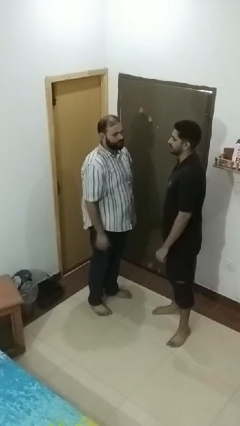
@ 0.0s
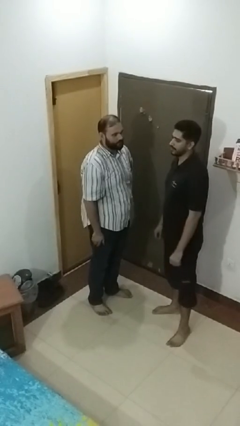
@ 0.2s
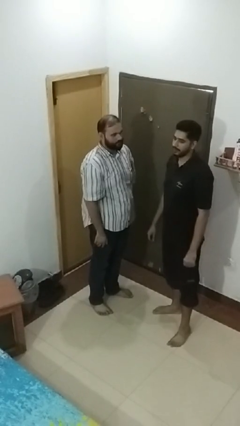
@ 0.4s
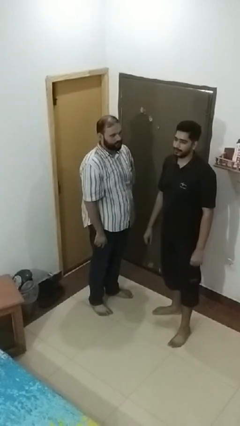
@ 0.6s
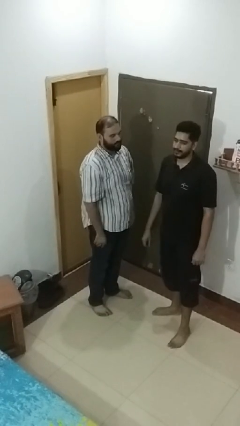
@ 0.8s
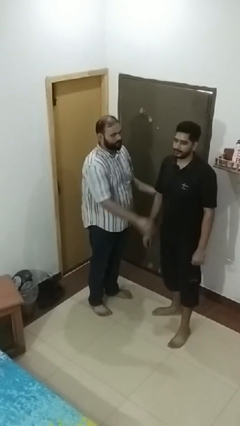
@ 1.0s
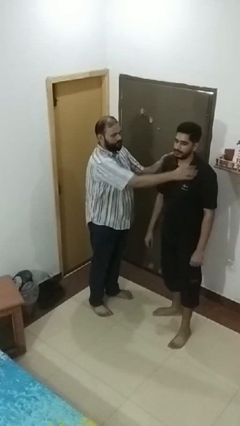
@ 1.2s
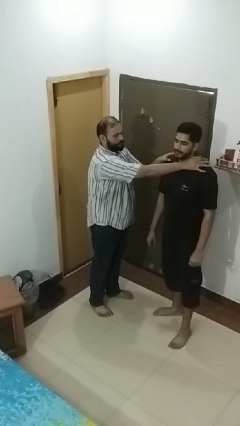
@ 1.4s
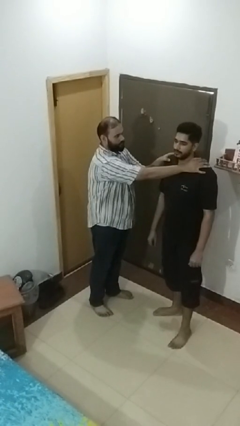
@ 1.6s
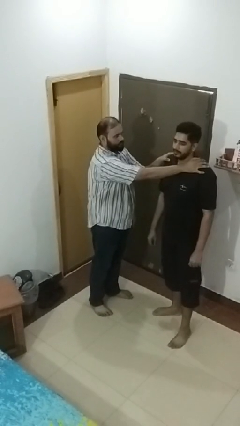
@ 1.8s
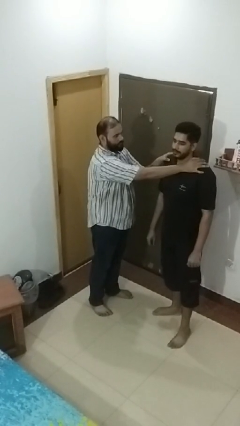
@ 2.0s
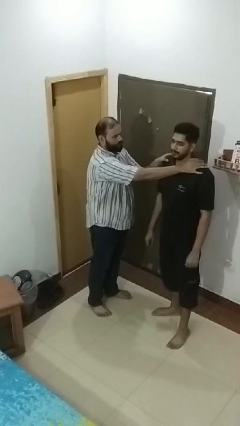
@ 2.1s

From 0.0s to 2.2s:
person grabs person by shoulder

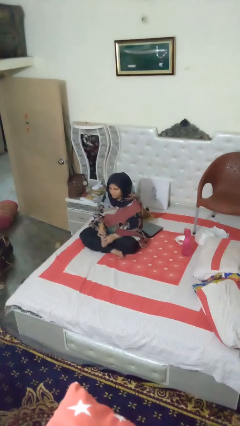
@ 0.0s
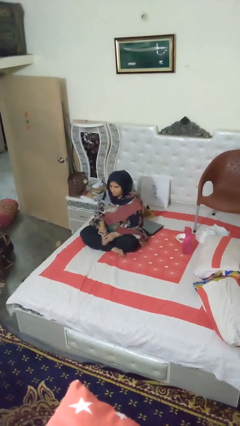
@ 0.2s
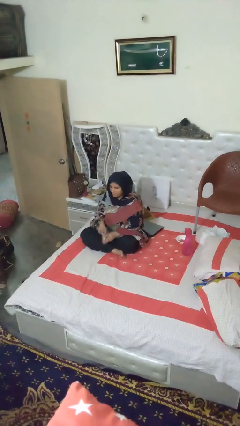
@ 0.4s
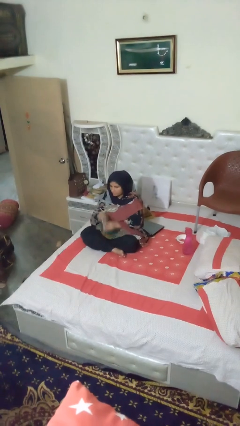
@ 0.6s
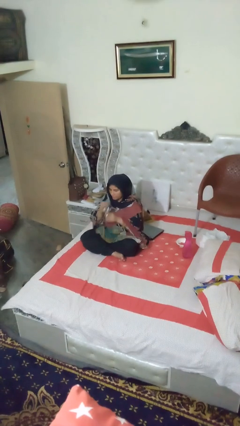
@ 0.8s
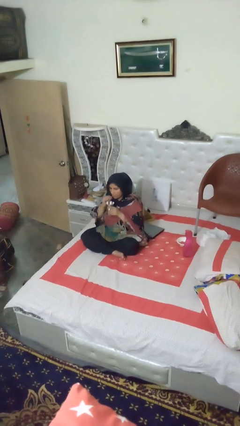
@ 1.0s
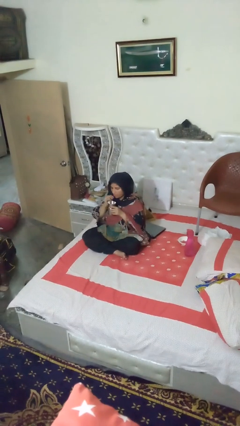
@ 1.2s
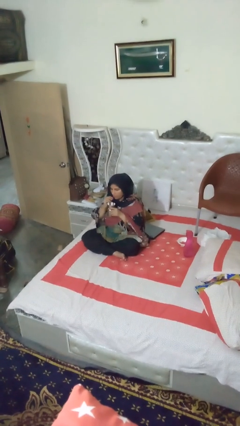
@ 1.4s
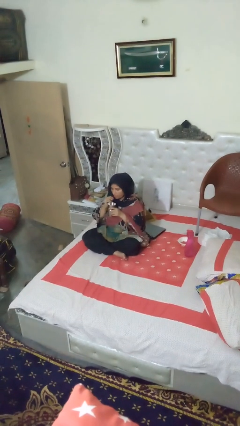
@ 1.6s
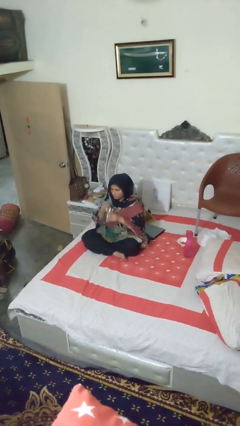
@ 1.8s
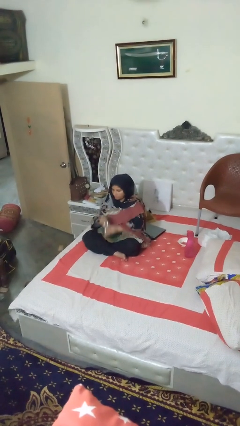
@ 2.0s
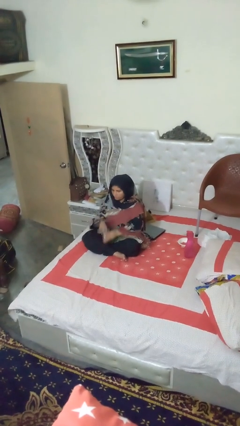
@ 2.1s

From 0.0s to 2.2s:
person drinks from straw

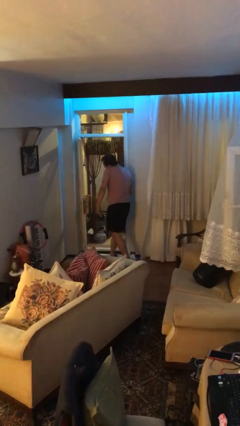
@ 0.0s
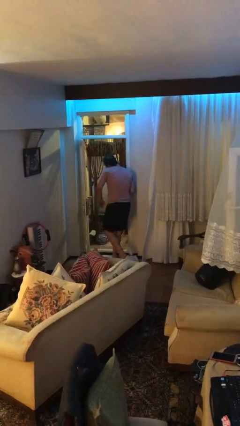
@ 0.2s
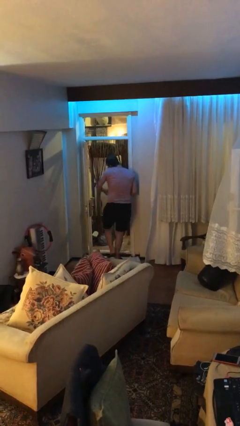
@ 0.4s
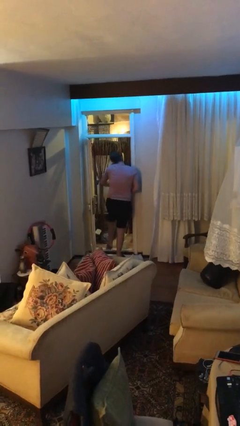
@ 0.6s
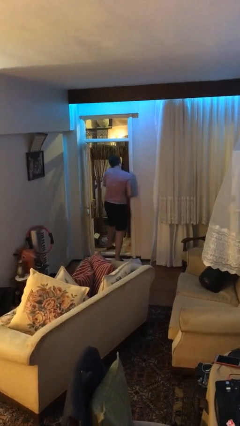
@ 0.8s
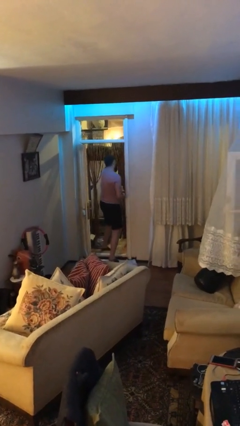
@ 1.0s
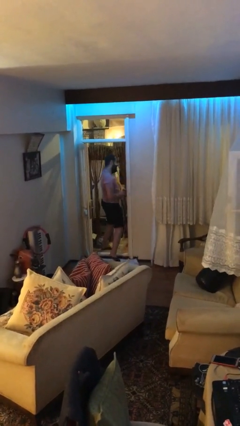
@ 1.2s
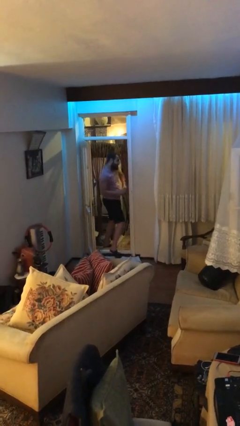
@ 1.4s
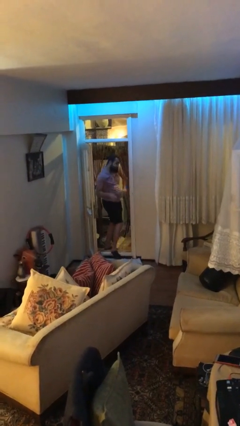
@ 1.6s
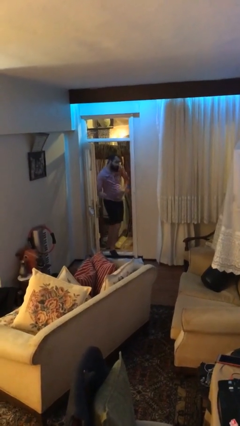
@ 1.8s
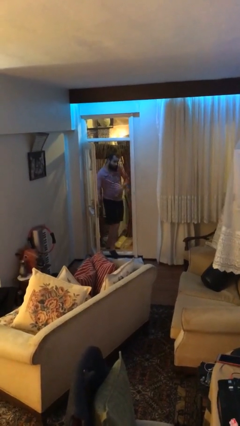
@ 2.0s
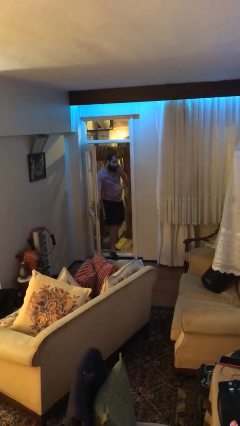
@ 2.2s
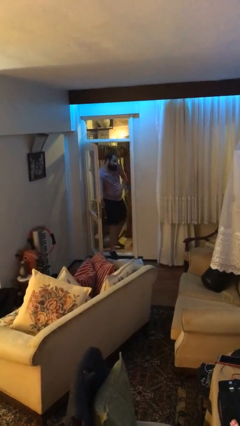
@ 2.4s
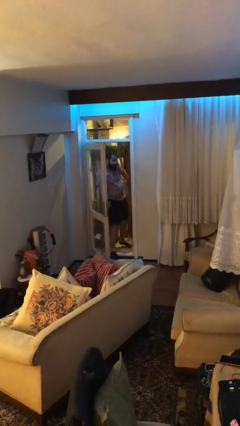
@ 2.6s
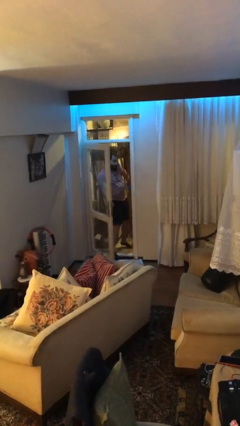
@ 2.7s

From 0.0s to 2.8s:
person exits scene through structure

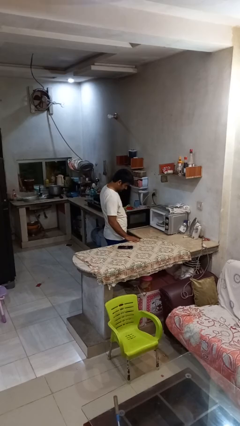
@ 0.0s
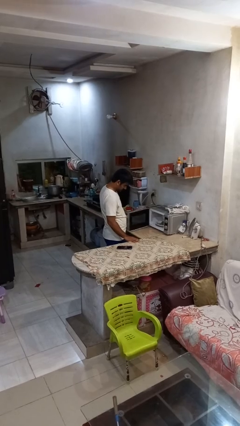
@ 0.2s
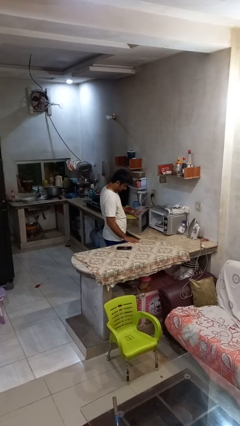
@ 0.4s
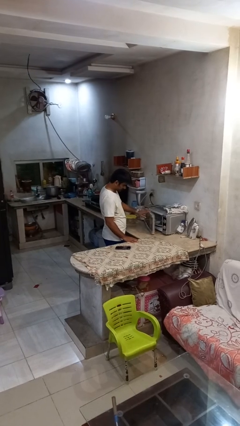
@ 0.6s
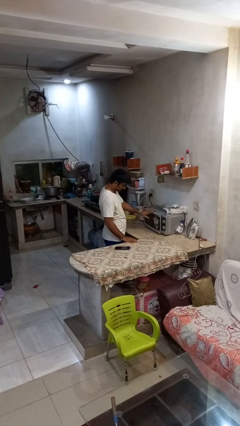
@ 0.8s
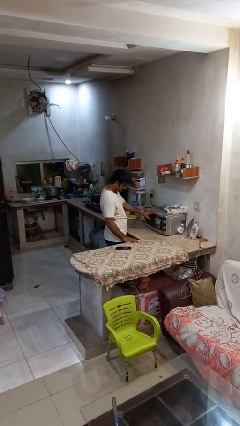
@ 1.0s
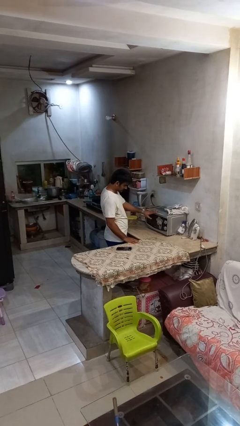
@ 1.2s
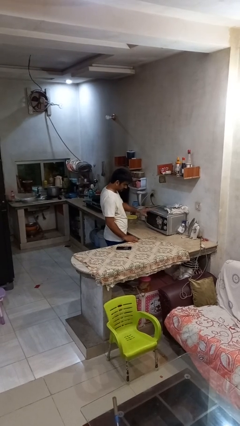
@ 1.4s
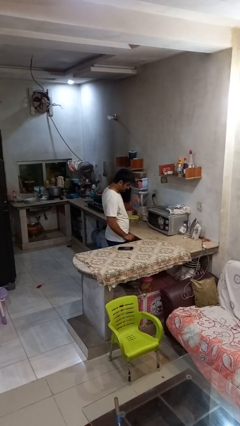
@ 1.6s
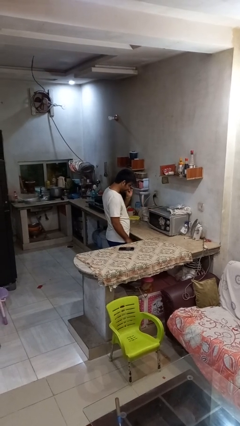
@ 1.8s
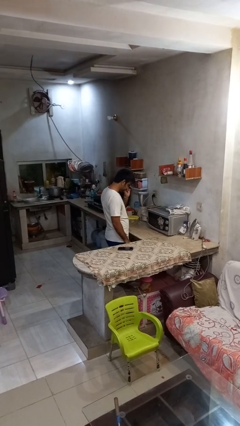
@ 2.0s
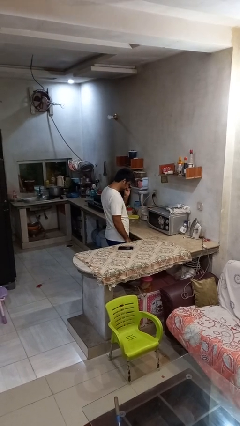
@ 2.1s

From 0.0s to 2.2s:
person closes microwave

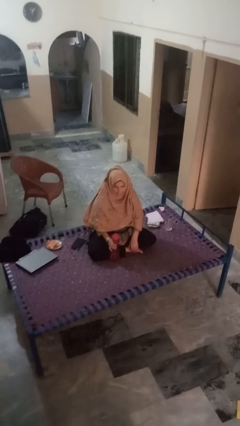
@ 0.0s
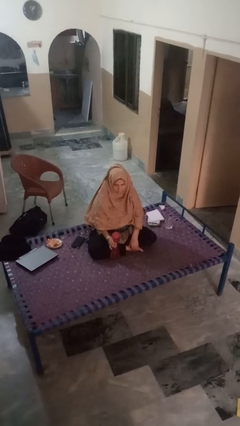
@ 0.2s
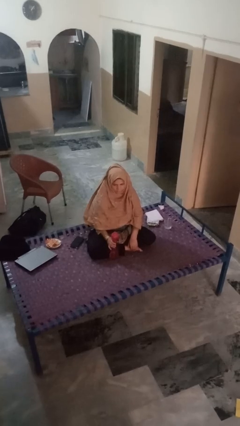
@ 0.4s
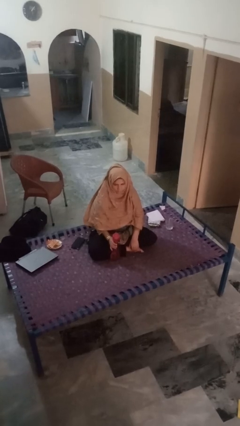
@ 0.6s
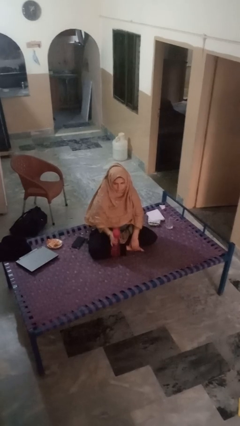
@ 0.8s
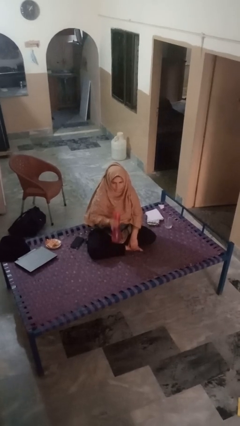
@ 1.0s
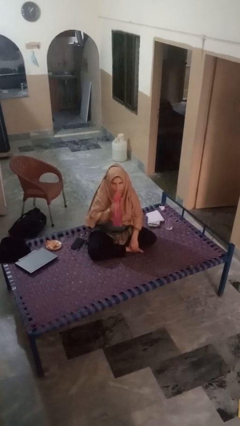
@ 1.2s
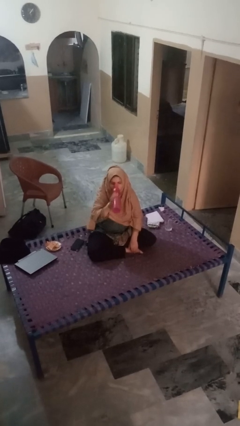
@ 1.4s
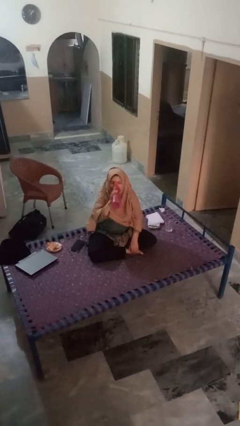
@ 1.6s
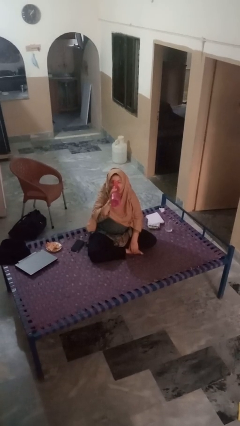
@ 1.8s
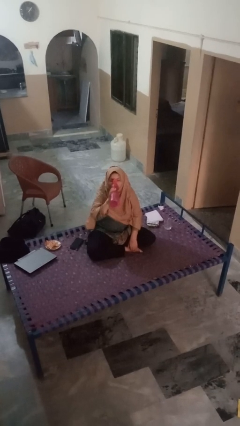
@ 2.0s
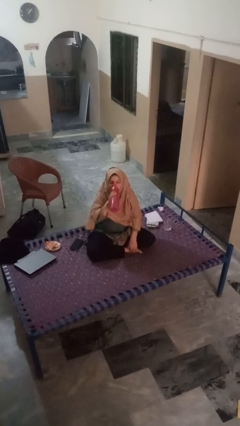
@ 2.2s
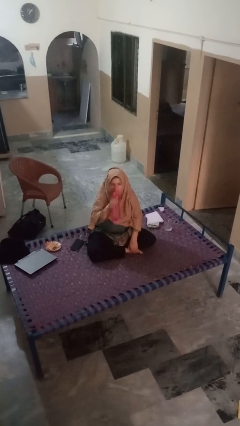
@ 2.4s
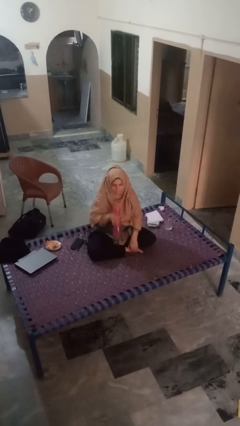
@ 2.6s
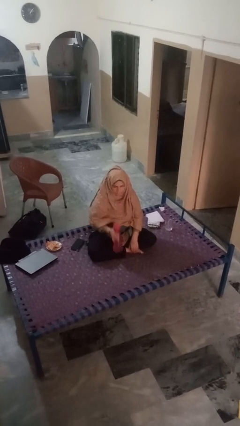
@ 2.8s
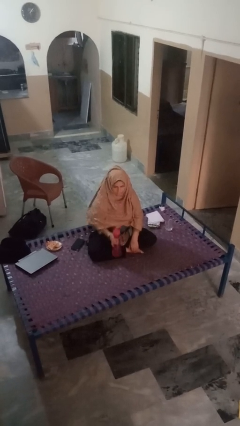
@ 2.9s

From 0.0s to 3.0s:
person drinks from bottle

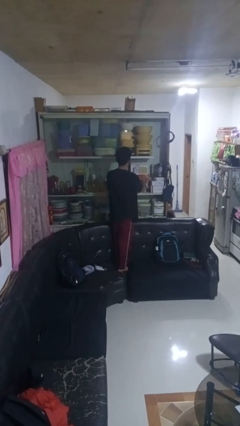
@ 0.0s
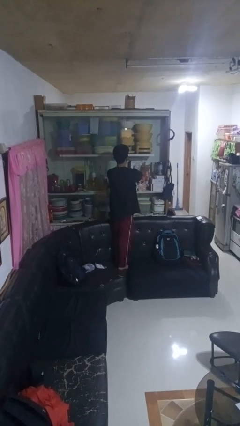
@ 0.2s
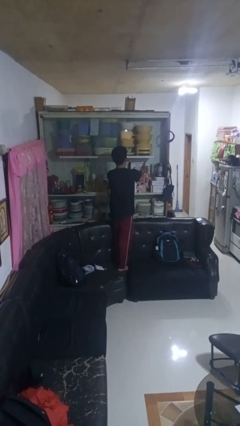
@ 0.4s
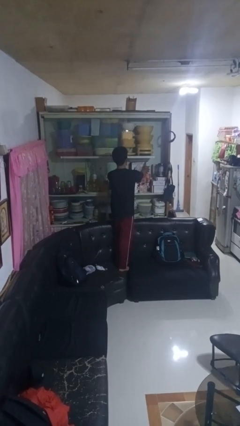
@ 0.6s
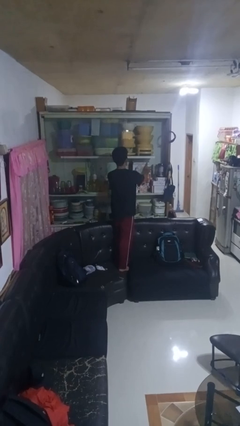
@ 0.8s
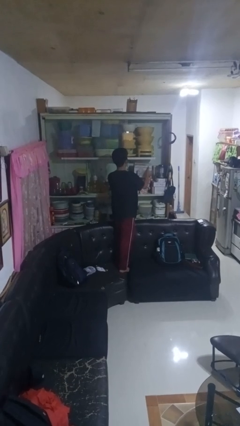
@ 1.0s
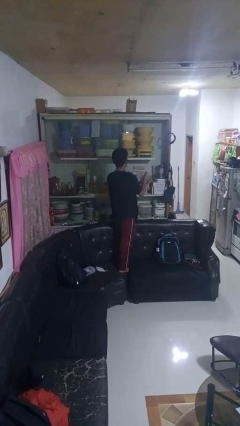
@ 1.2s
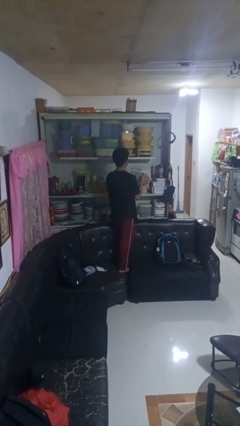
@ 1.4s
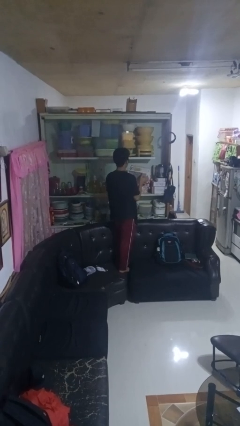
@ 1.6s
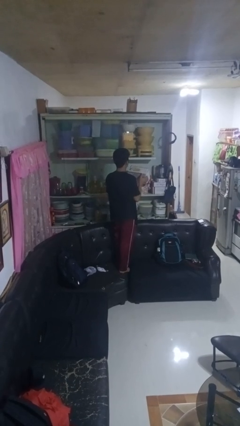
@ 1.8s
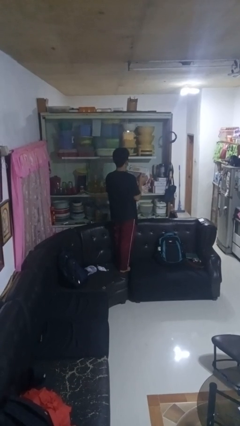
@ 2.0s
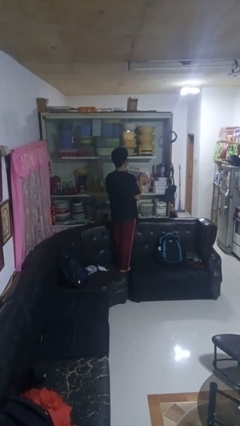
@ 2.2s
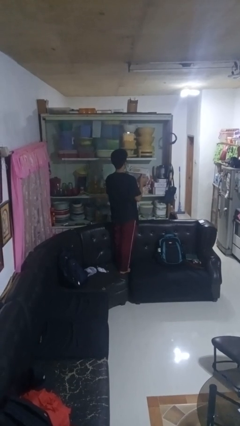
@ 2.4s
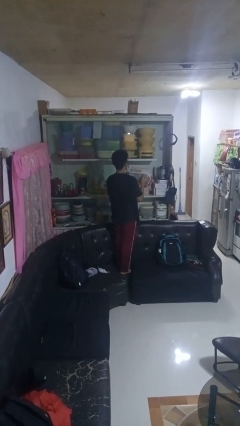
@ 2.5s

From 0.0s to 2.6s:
person picks up object from cabinet

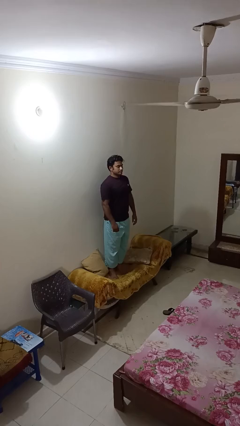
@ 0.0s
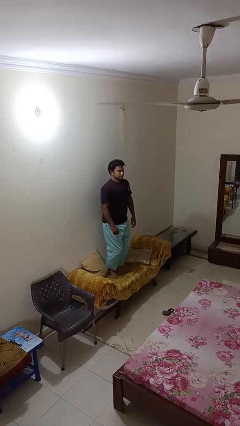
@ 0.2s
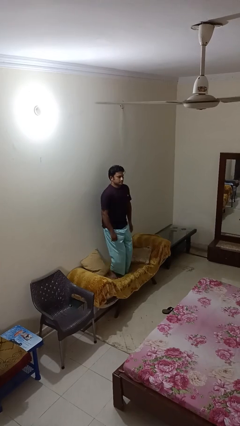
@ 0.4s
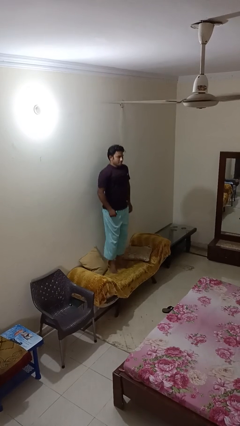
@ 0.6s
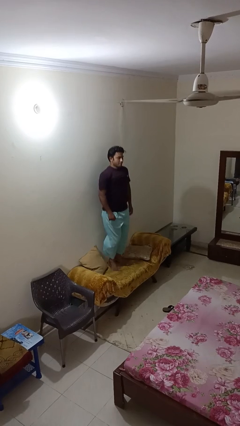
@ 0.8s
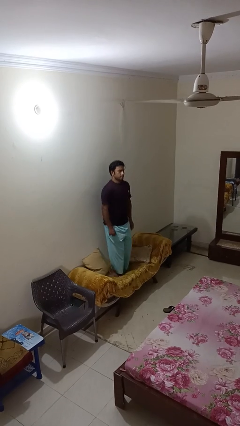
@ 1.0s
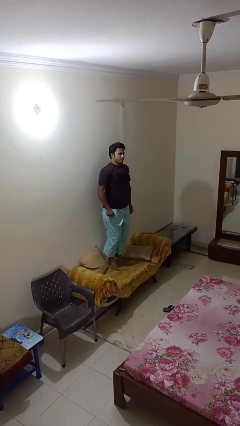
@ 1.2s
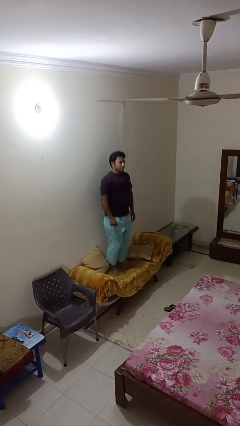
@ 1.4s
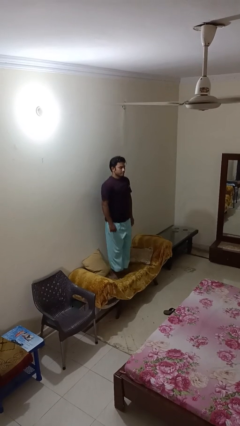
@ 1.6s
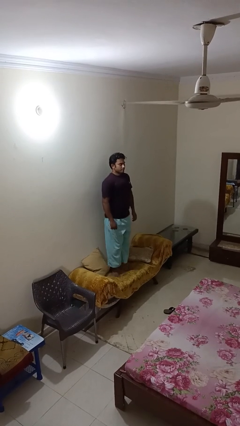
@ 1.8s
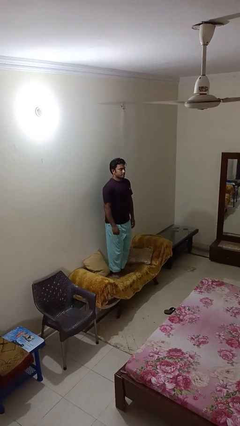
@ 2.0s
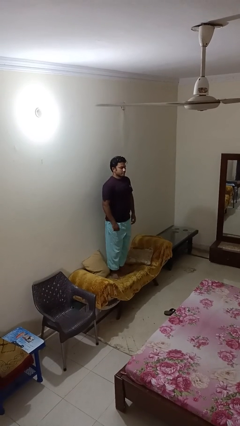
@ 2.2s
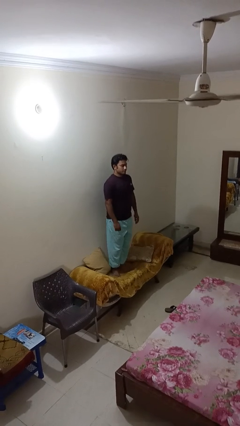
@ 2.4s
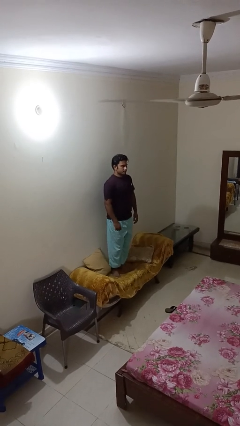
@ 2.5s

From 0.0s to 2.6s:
person jumps on couch
